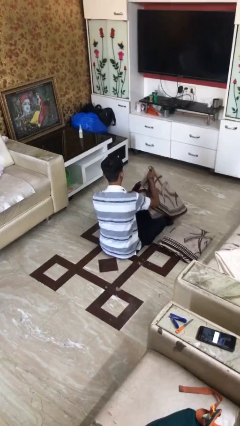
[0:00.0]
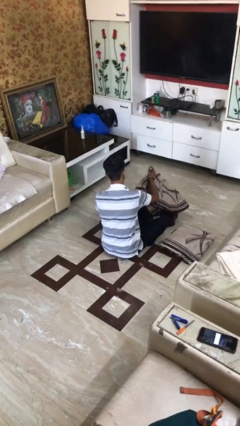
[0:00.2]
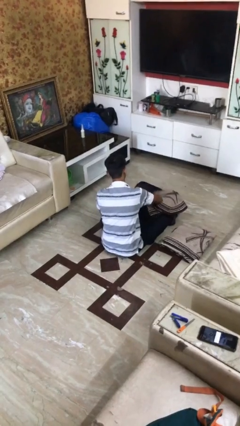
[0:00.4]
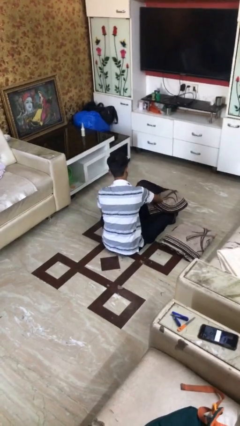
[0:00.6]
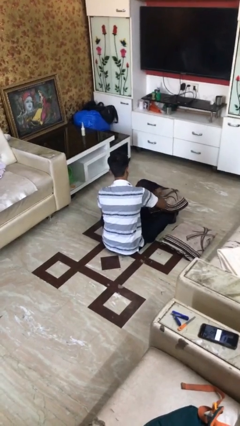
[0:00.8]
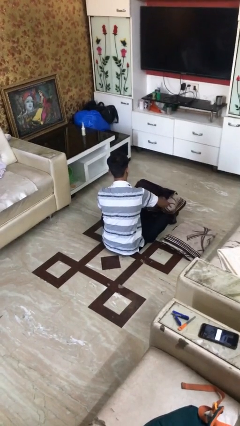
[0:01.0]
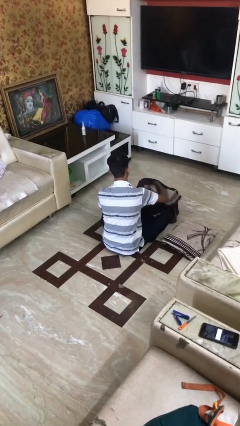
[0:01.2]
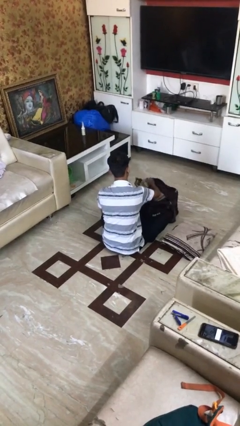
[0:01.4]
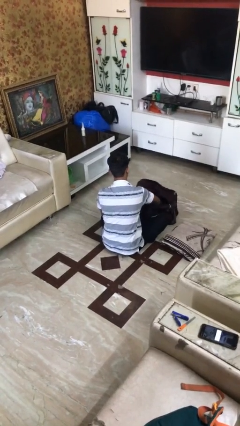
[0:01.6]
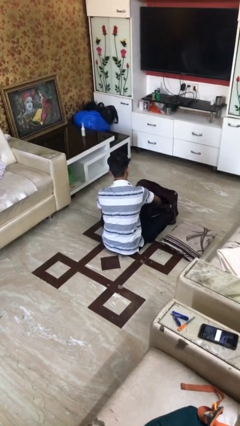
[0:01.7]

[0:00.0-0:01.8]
person loads clothes into suitcase

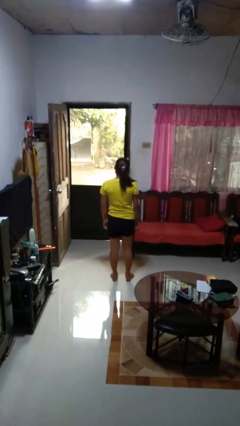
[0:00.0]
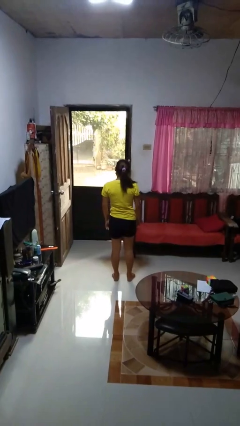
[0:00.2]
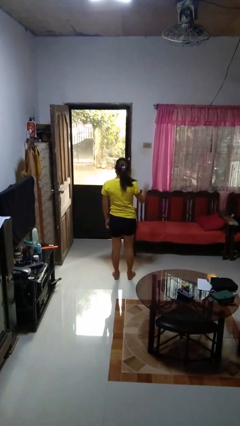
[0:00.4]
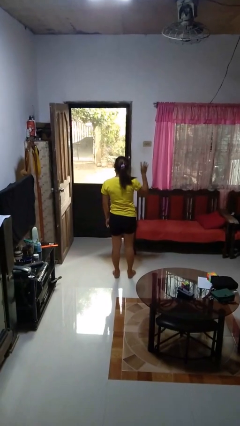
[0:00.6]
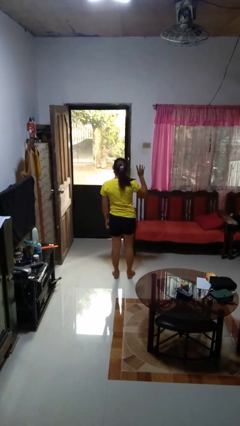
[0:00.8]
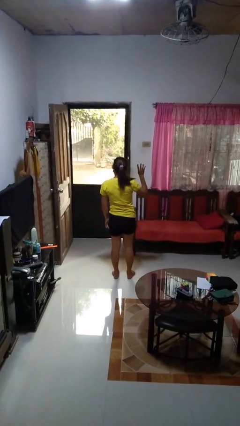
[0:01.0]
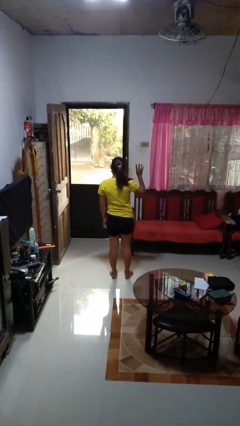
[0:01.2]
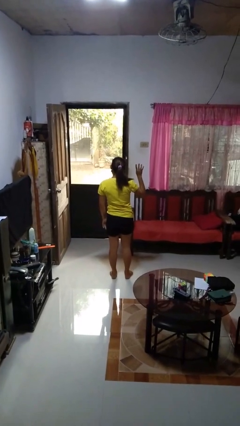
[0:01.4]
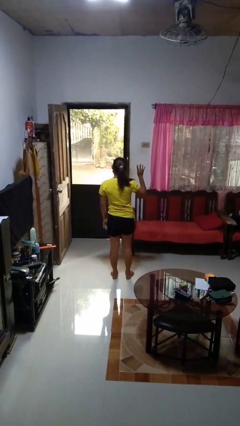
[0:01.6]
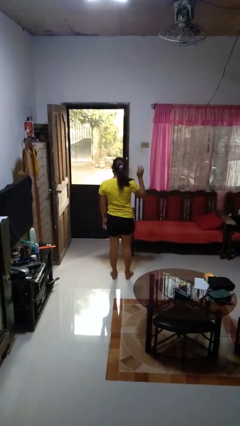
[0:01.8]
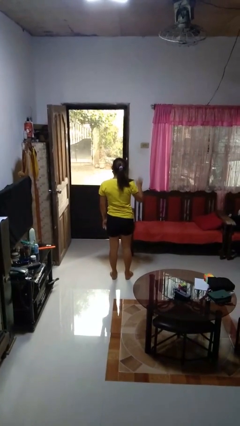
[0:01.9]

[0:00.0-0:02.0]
person gestures number four

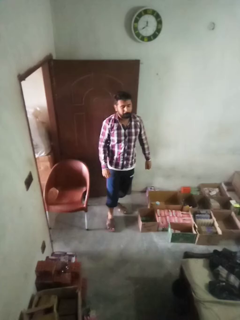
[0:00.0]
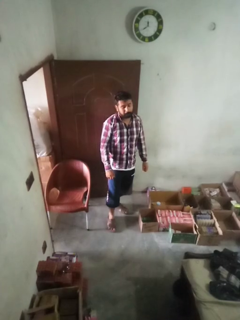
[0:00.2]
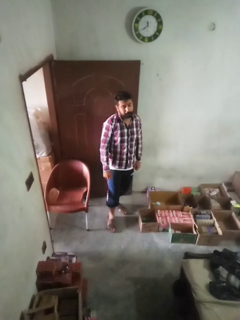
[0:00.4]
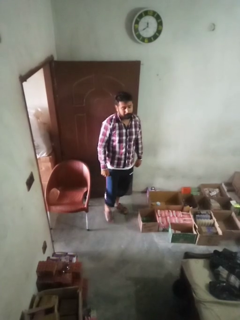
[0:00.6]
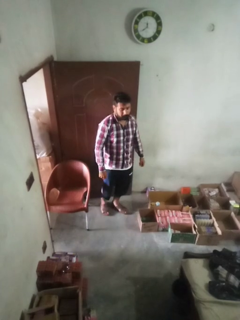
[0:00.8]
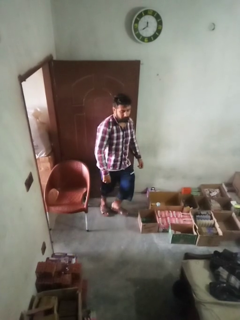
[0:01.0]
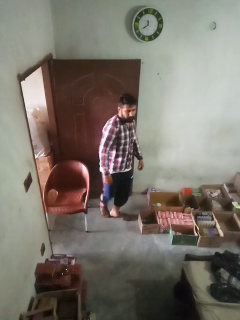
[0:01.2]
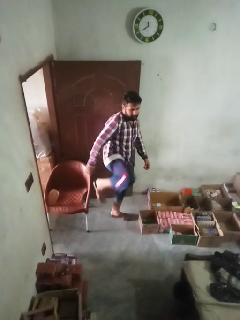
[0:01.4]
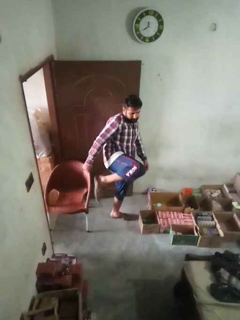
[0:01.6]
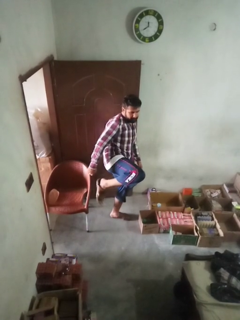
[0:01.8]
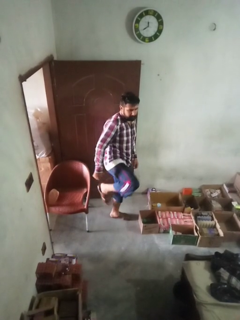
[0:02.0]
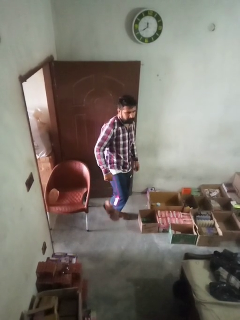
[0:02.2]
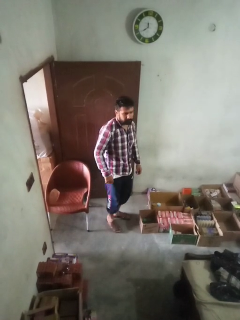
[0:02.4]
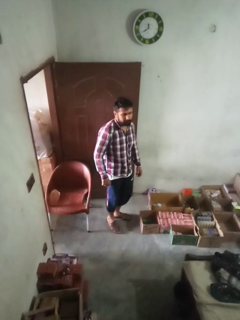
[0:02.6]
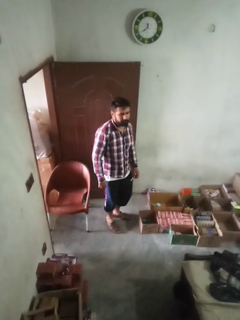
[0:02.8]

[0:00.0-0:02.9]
person karate kicks

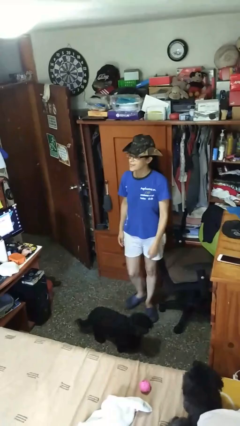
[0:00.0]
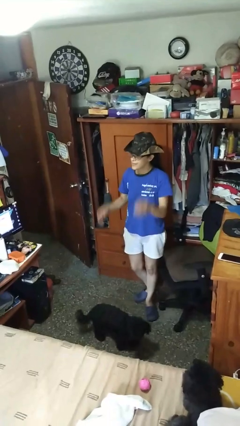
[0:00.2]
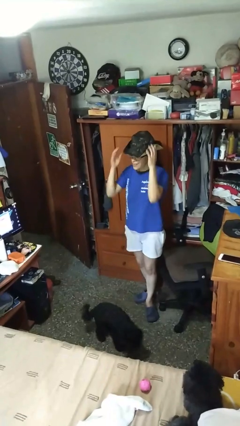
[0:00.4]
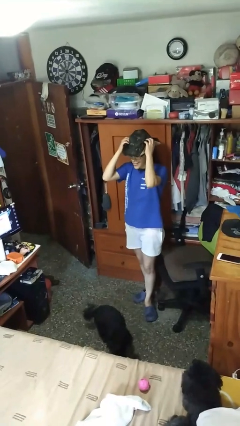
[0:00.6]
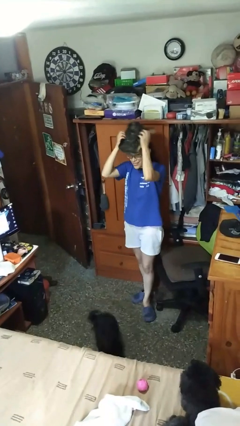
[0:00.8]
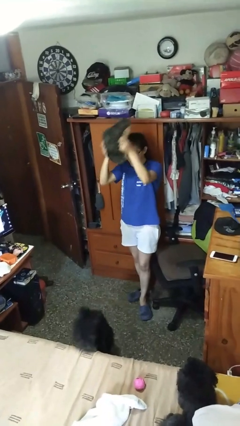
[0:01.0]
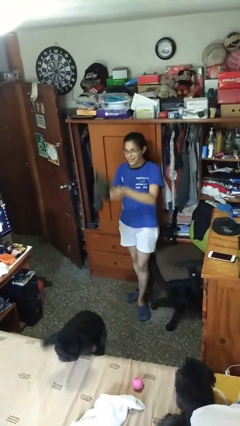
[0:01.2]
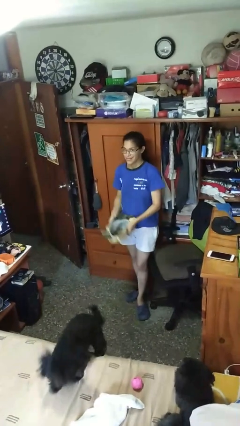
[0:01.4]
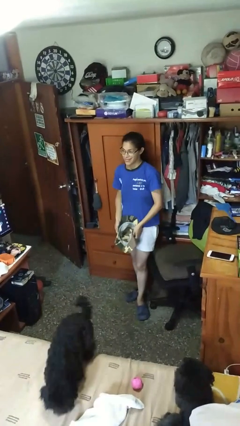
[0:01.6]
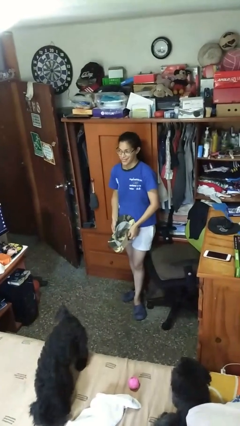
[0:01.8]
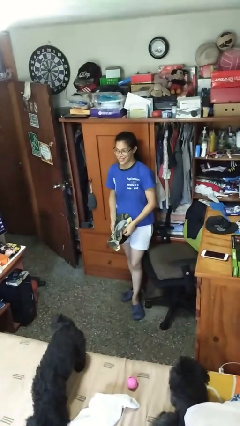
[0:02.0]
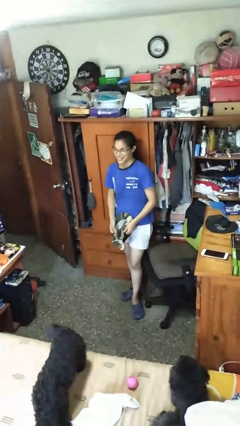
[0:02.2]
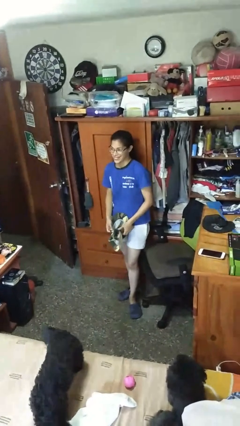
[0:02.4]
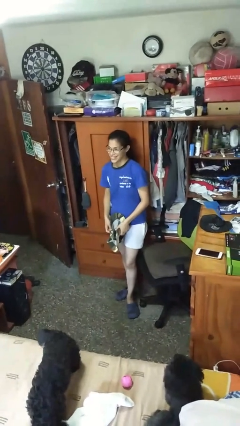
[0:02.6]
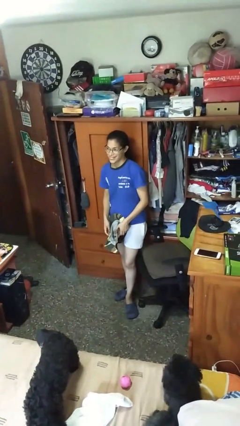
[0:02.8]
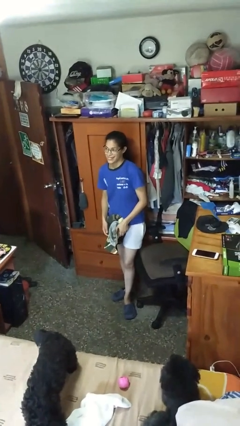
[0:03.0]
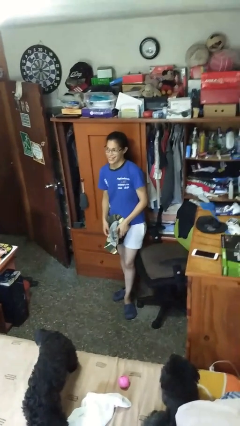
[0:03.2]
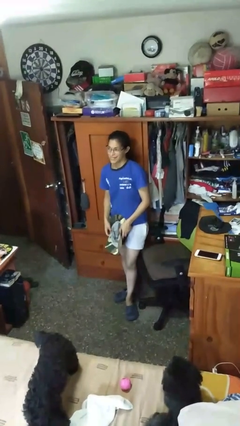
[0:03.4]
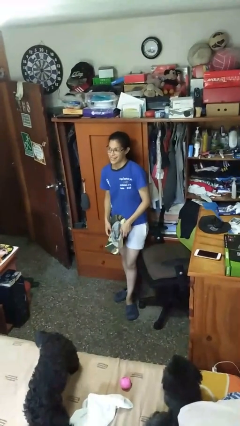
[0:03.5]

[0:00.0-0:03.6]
person takes off hat

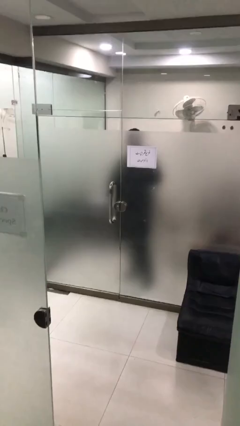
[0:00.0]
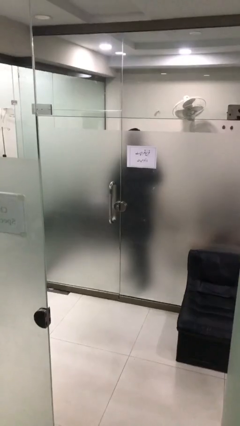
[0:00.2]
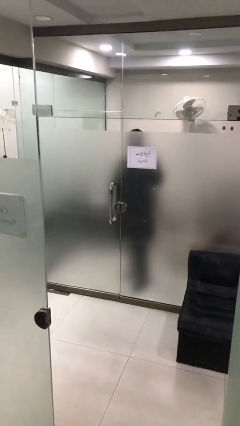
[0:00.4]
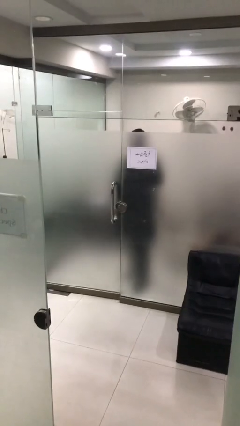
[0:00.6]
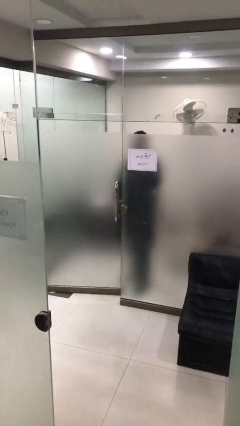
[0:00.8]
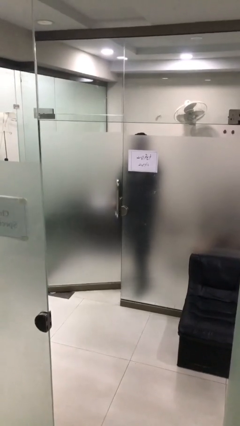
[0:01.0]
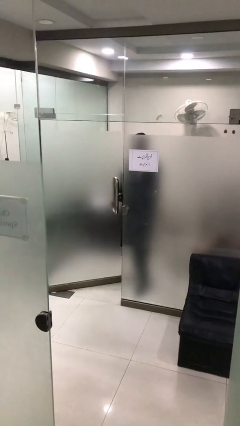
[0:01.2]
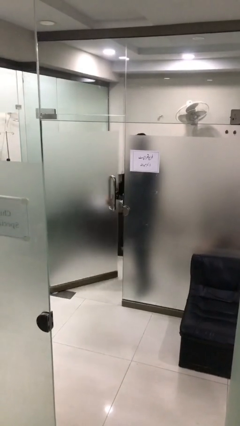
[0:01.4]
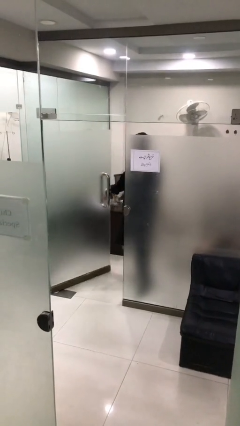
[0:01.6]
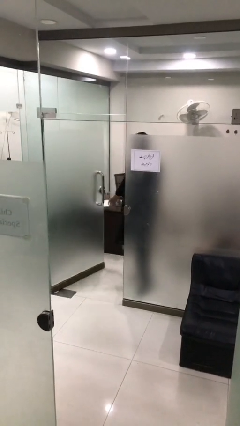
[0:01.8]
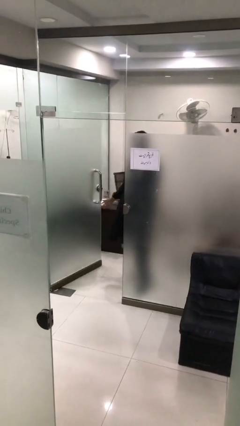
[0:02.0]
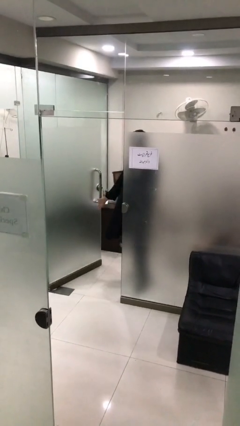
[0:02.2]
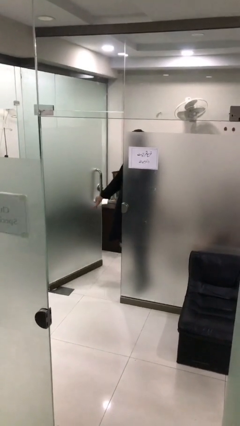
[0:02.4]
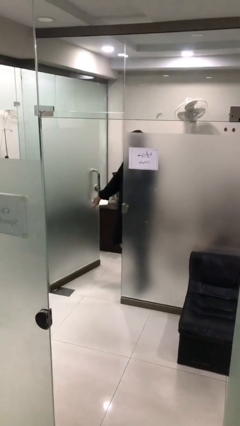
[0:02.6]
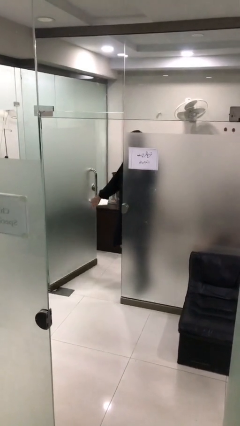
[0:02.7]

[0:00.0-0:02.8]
person opens facility door

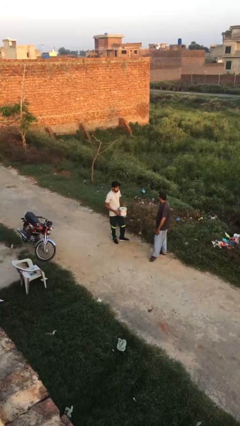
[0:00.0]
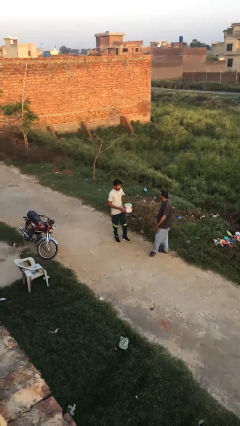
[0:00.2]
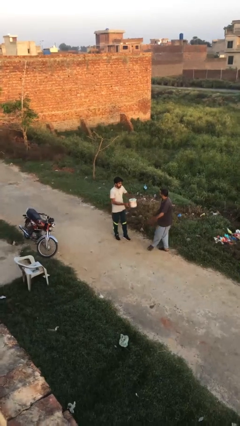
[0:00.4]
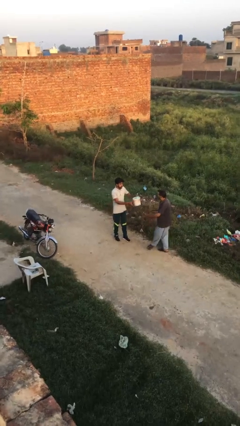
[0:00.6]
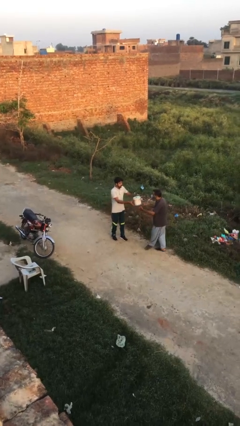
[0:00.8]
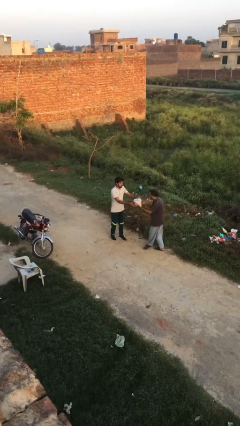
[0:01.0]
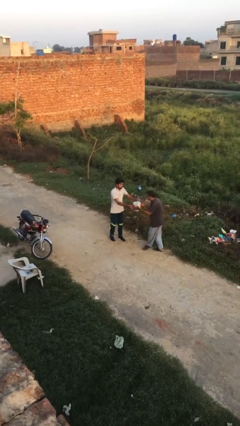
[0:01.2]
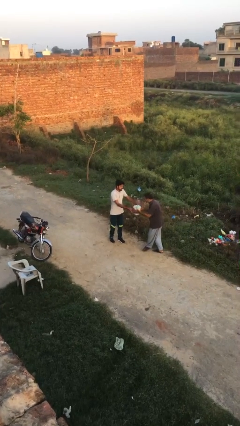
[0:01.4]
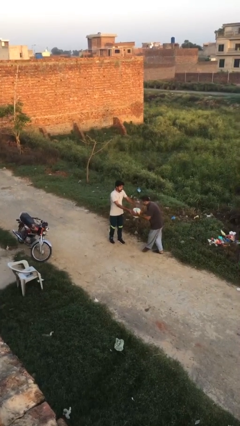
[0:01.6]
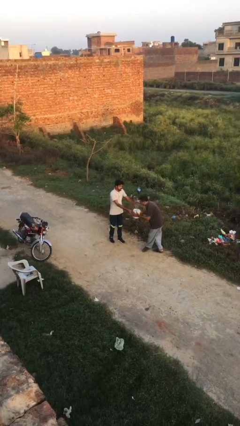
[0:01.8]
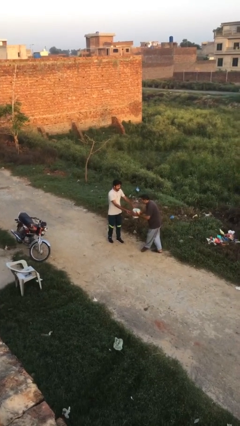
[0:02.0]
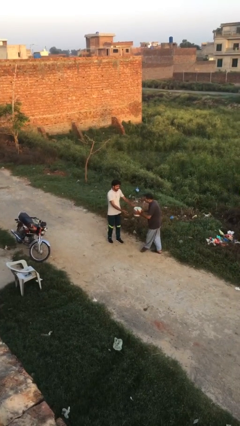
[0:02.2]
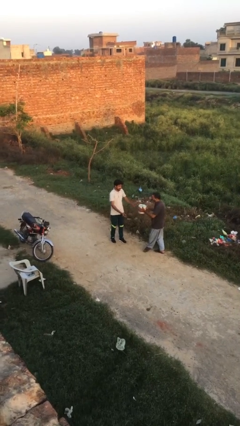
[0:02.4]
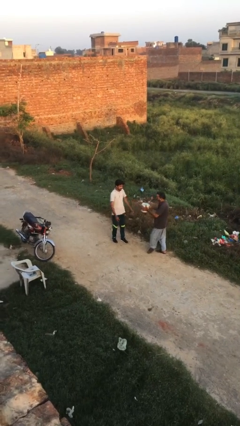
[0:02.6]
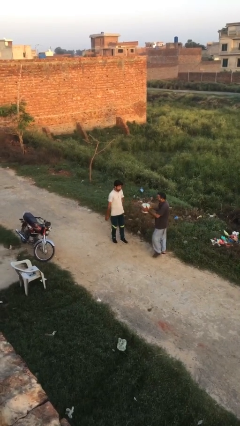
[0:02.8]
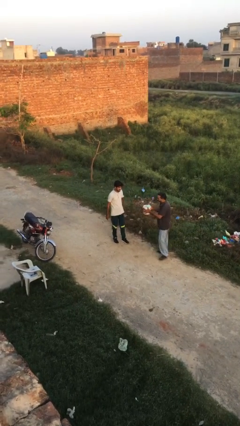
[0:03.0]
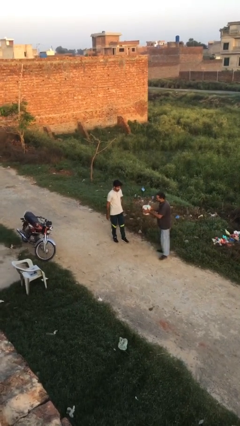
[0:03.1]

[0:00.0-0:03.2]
person transfers object to person

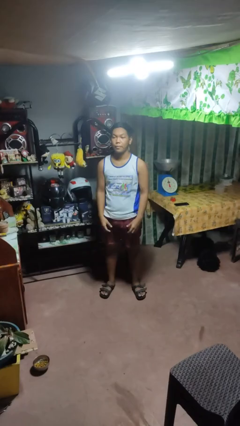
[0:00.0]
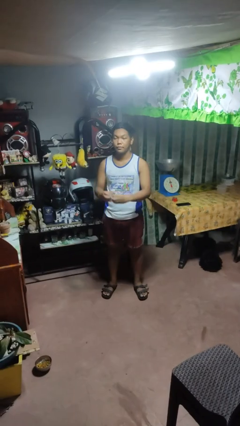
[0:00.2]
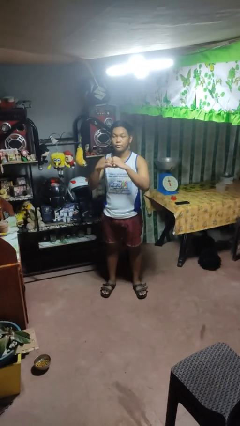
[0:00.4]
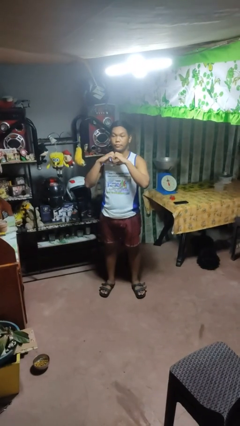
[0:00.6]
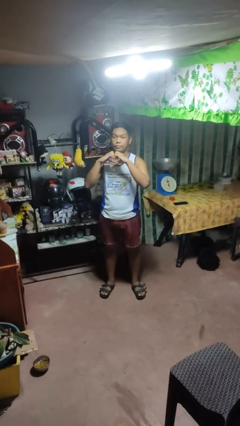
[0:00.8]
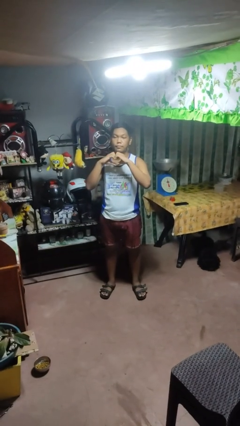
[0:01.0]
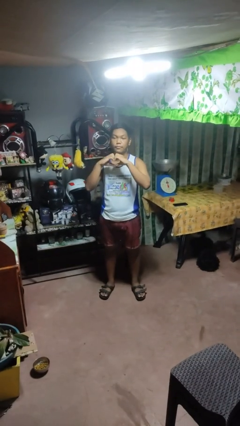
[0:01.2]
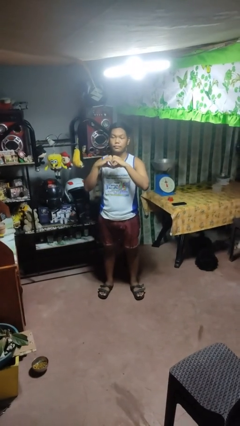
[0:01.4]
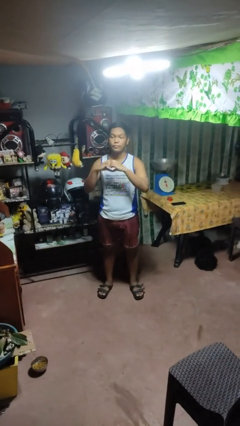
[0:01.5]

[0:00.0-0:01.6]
person gestures heart
